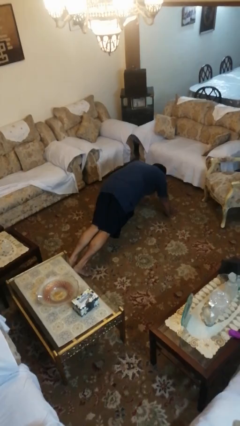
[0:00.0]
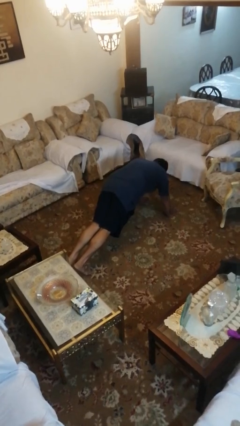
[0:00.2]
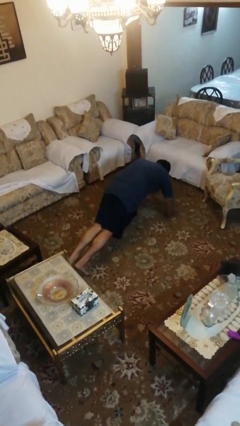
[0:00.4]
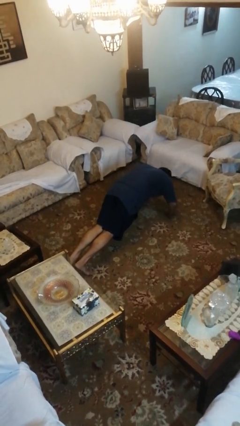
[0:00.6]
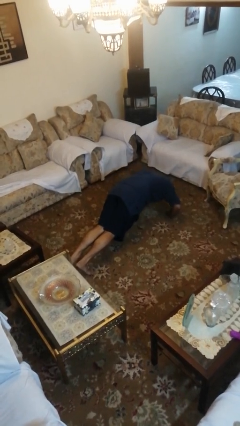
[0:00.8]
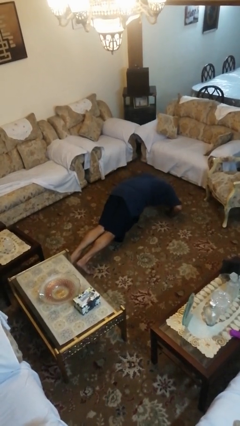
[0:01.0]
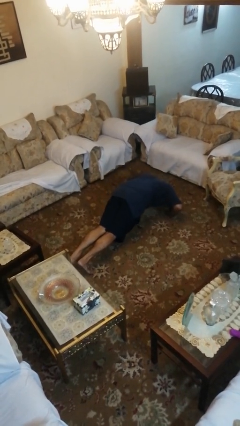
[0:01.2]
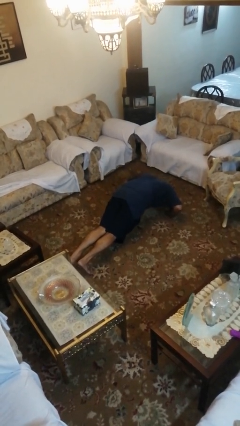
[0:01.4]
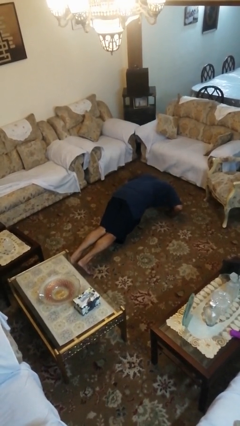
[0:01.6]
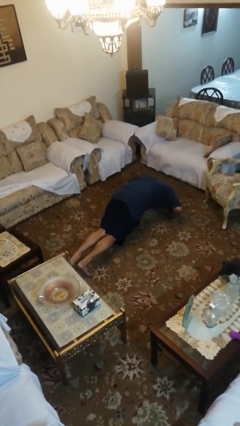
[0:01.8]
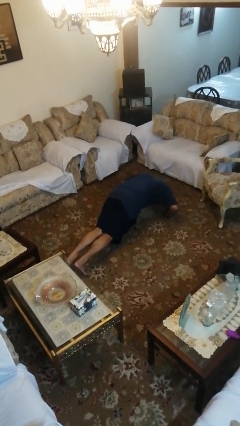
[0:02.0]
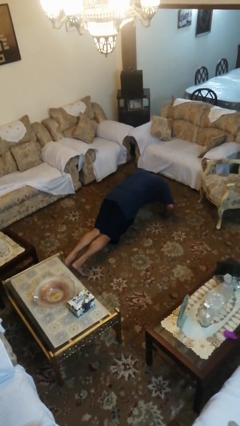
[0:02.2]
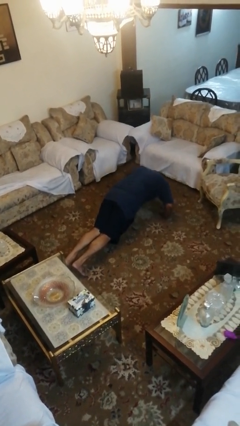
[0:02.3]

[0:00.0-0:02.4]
person exercises with pushup

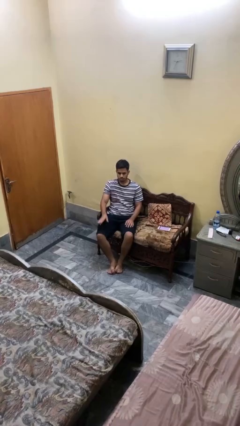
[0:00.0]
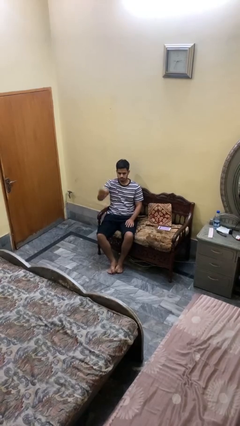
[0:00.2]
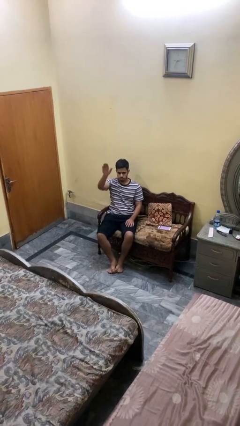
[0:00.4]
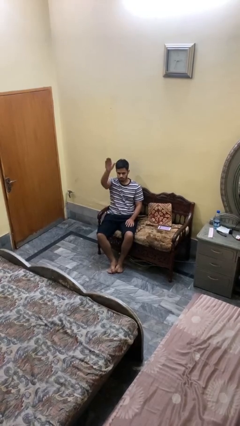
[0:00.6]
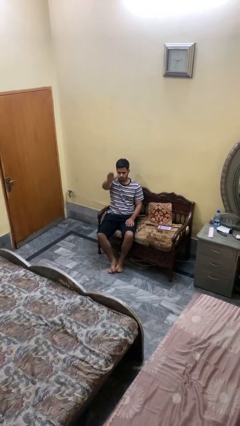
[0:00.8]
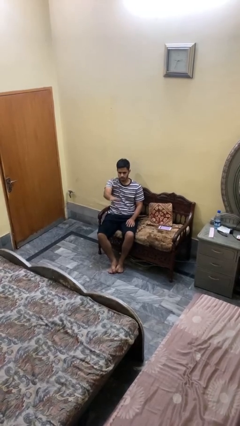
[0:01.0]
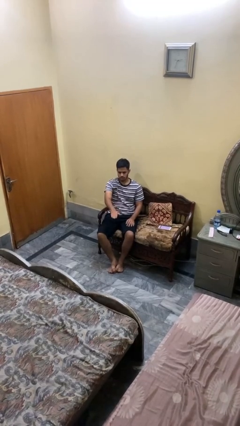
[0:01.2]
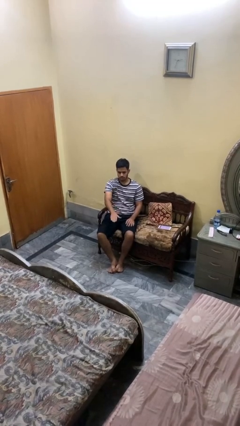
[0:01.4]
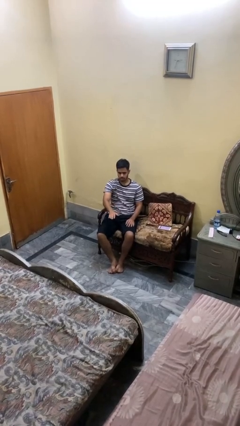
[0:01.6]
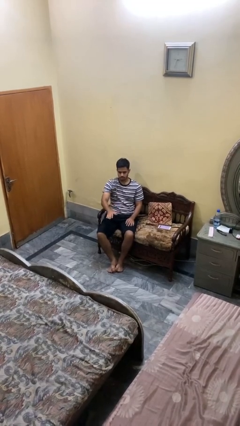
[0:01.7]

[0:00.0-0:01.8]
person gestures swipe down

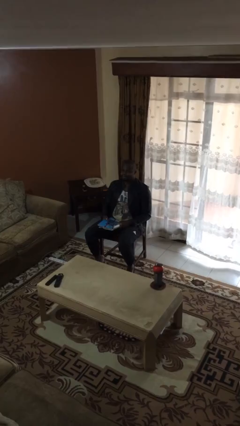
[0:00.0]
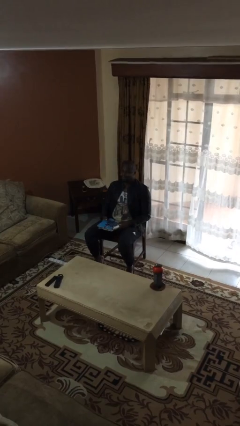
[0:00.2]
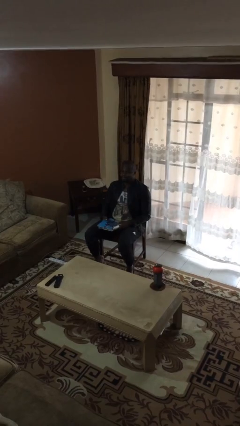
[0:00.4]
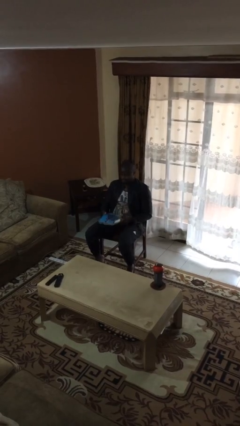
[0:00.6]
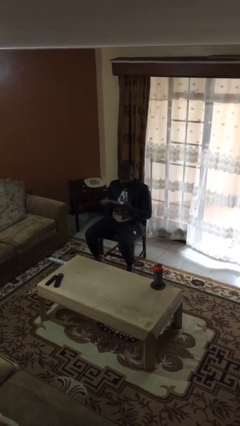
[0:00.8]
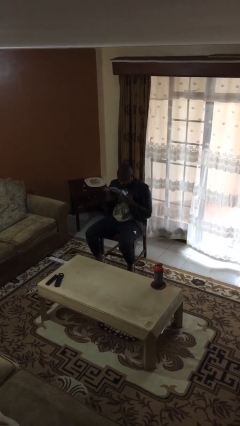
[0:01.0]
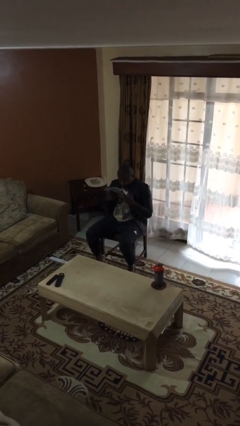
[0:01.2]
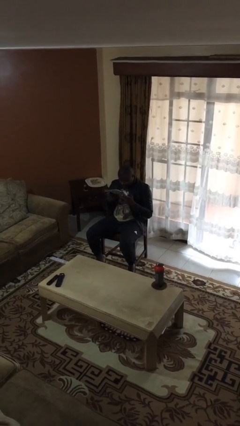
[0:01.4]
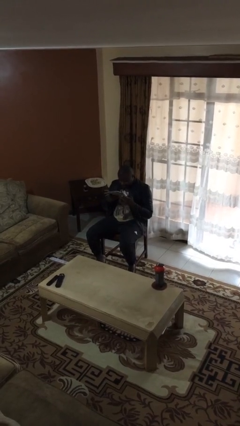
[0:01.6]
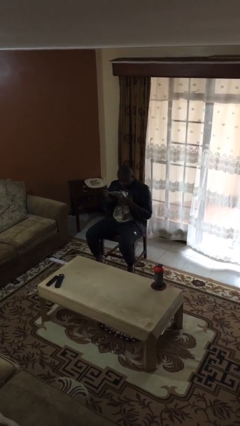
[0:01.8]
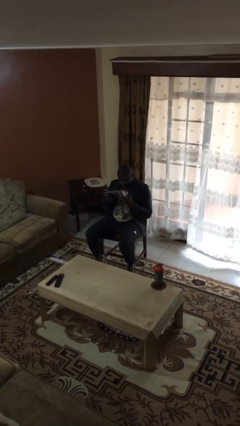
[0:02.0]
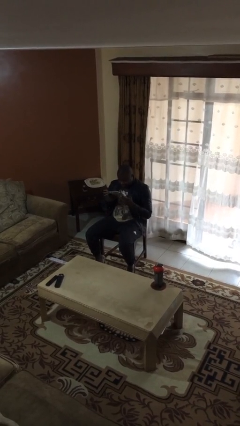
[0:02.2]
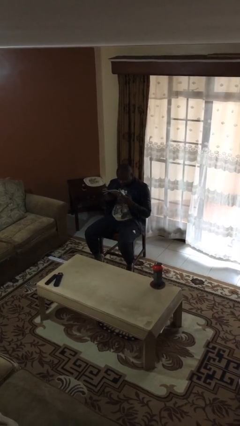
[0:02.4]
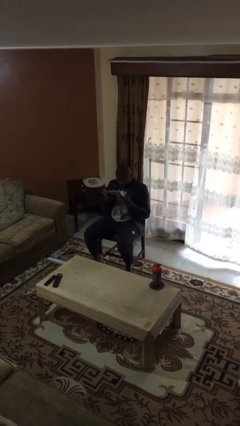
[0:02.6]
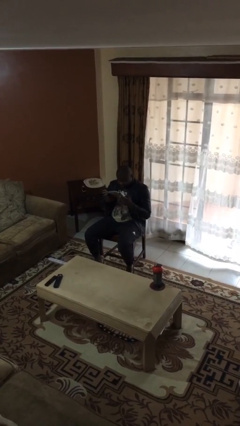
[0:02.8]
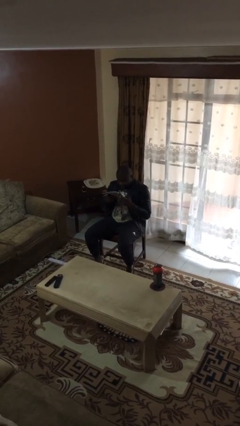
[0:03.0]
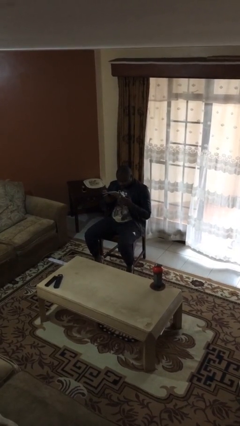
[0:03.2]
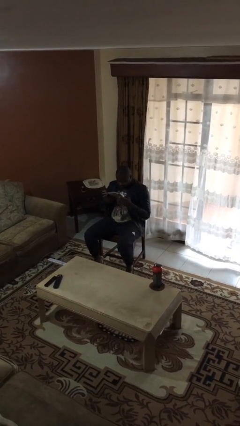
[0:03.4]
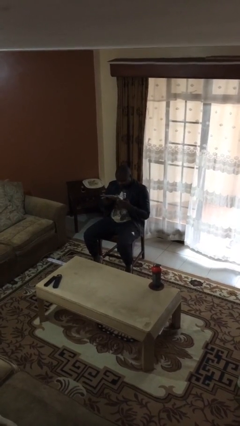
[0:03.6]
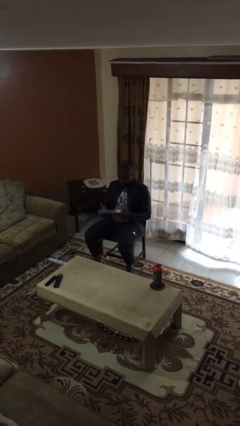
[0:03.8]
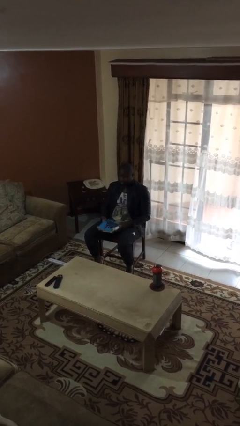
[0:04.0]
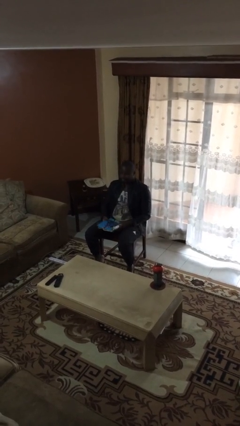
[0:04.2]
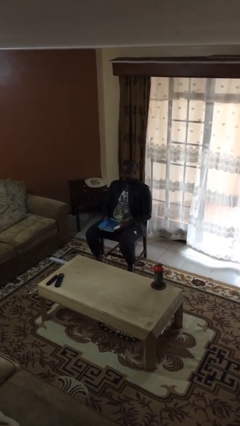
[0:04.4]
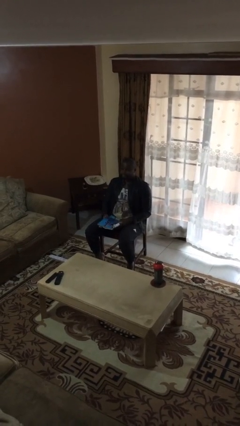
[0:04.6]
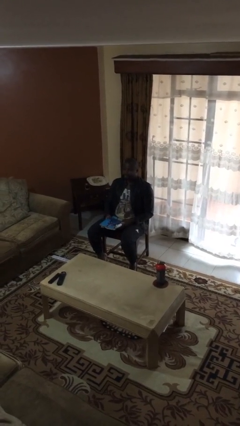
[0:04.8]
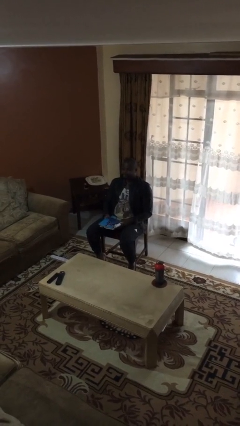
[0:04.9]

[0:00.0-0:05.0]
person reads document

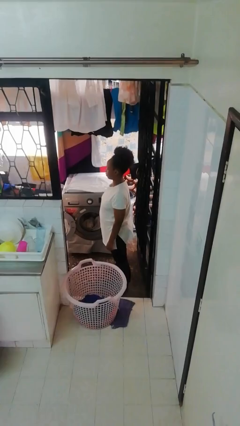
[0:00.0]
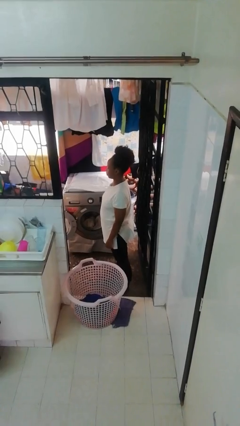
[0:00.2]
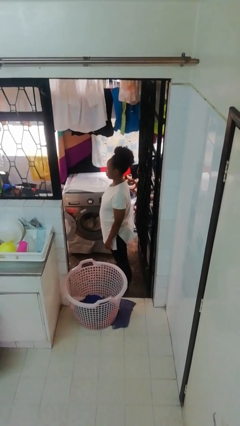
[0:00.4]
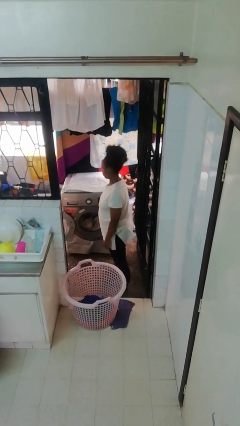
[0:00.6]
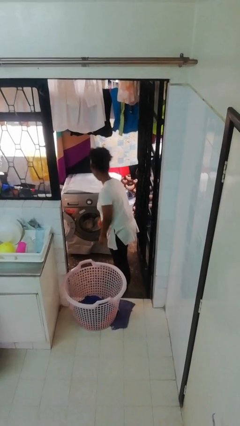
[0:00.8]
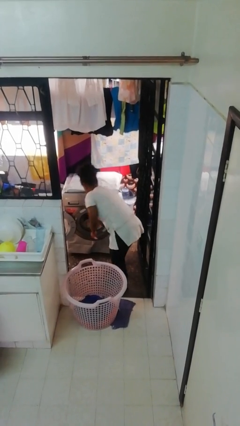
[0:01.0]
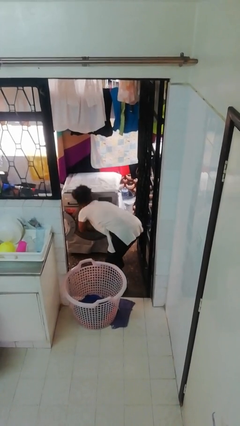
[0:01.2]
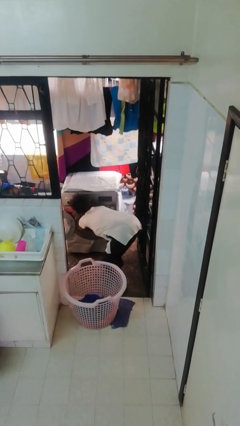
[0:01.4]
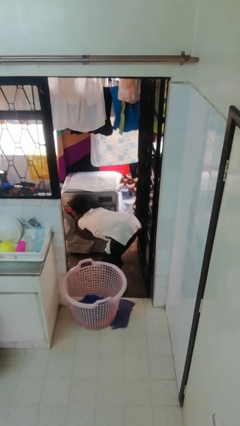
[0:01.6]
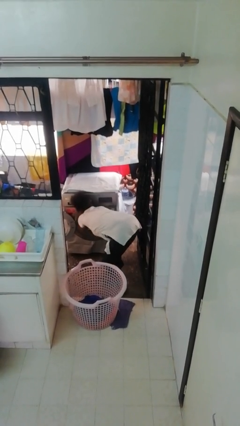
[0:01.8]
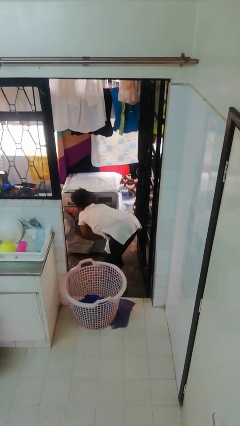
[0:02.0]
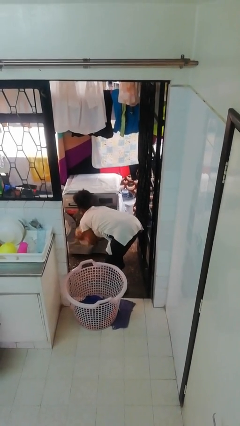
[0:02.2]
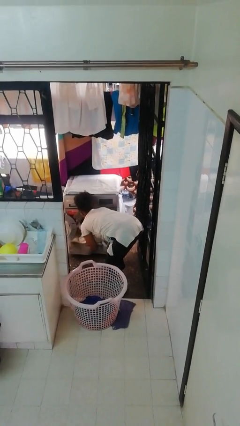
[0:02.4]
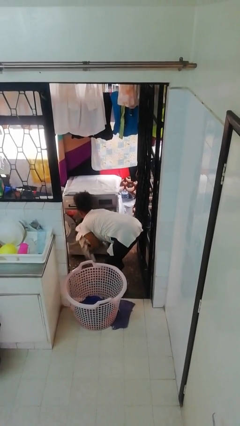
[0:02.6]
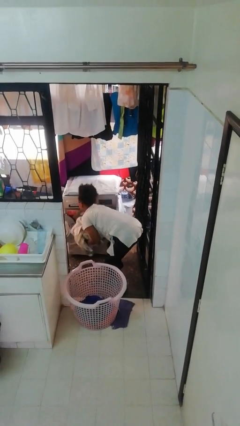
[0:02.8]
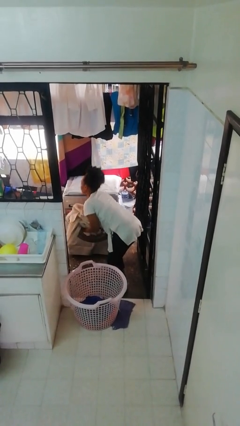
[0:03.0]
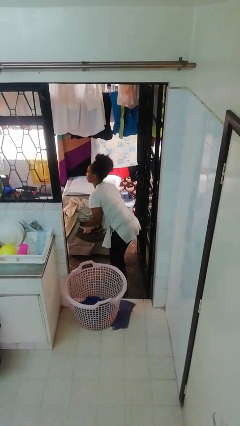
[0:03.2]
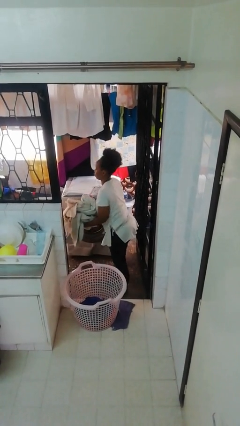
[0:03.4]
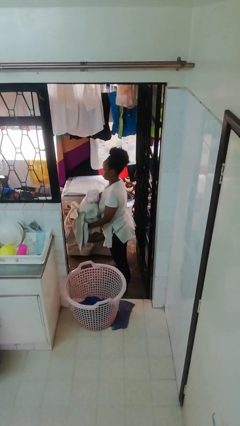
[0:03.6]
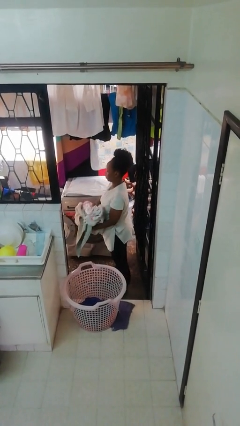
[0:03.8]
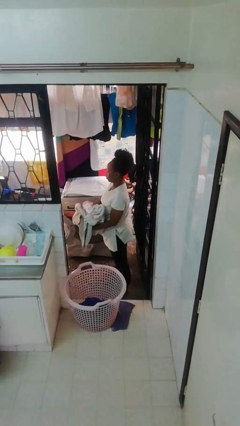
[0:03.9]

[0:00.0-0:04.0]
person unloads dryer

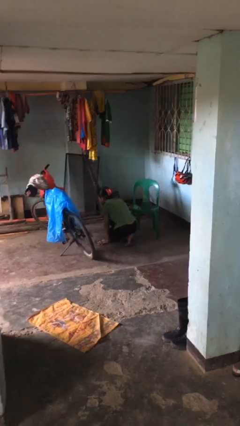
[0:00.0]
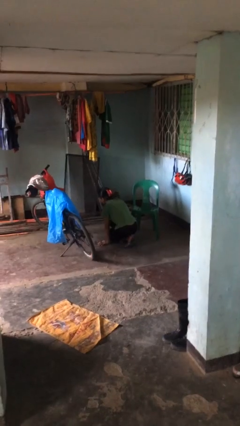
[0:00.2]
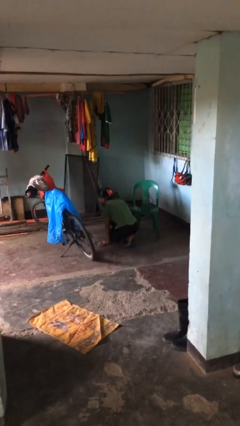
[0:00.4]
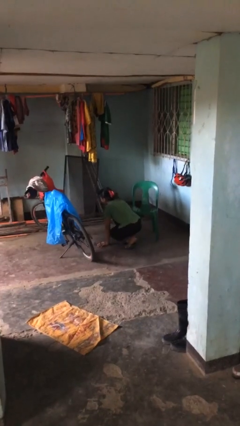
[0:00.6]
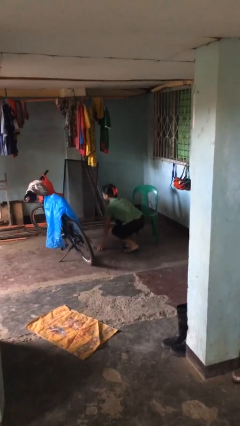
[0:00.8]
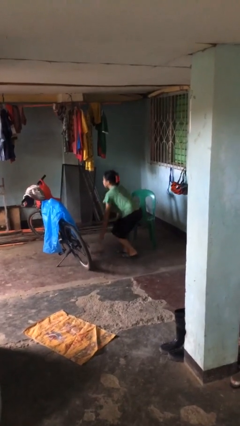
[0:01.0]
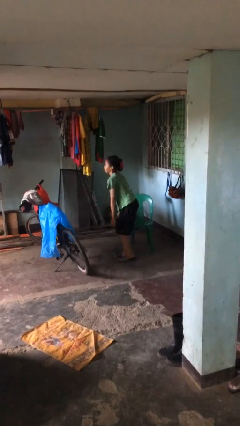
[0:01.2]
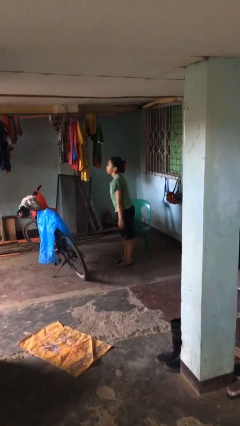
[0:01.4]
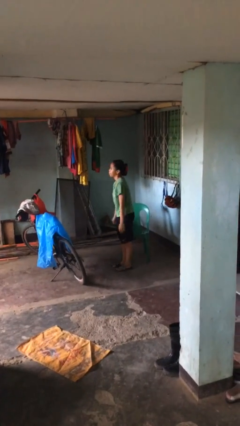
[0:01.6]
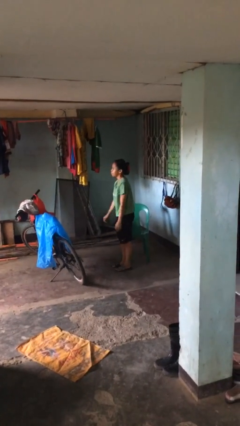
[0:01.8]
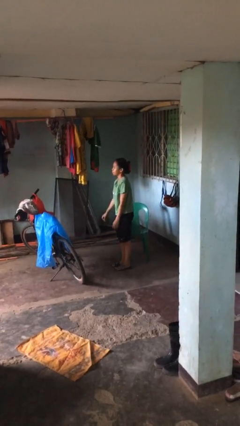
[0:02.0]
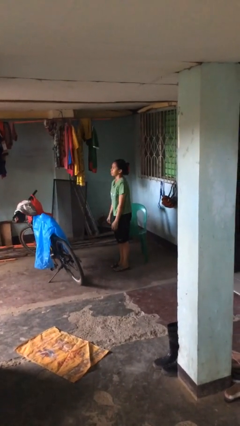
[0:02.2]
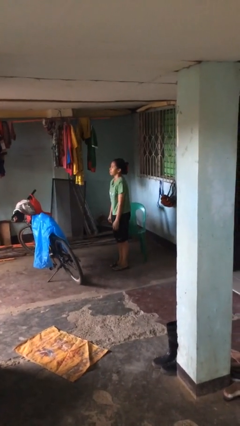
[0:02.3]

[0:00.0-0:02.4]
person stands up from floor

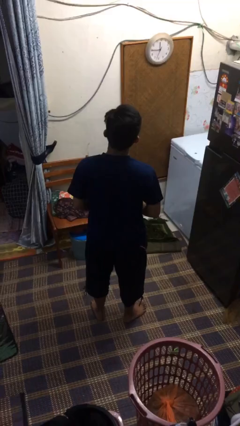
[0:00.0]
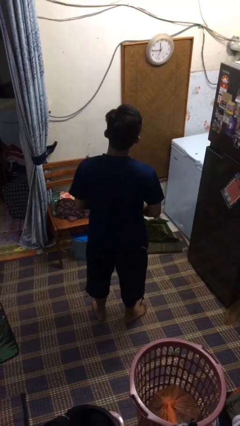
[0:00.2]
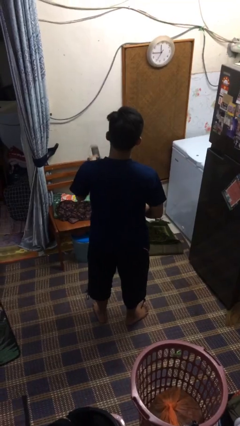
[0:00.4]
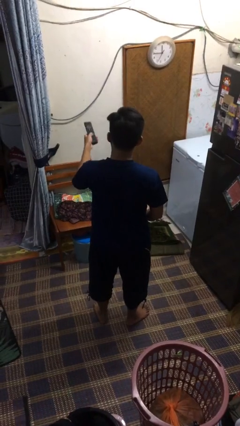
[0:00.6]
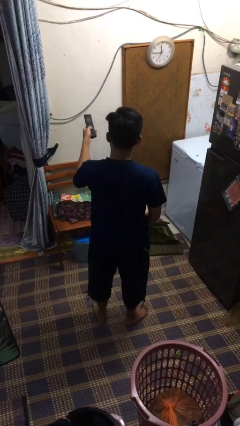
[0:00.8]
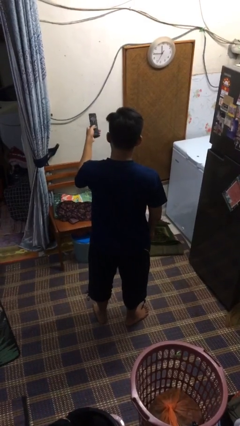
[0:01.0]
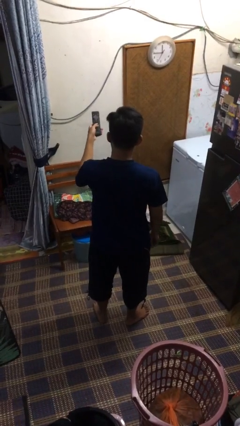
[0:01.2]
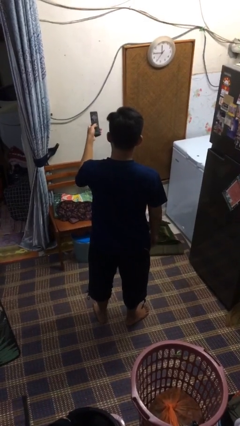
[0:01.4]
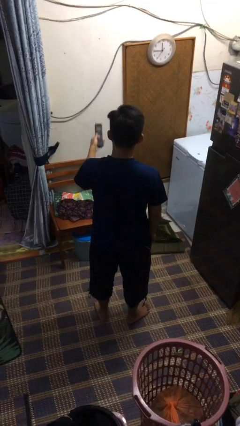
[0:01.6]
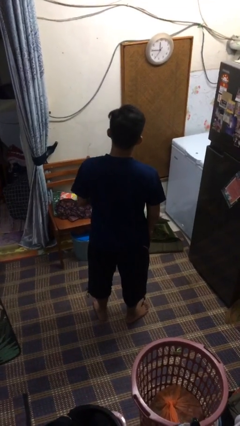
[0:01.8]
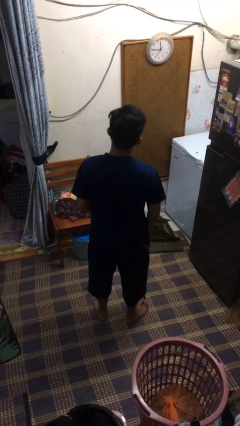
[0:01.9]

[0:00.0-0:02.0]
person uses television remote
